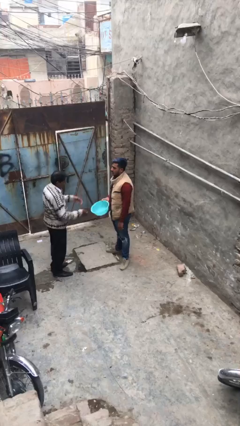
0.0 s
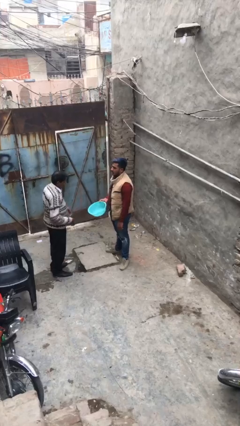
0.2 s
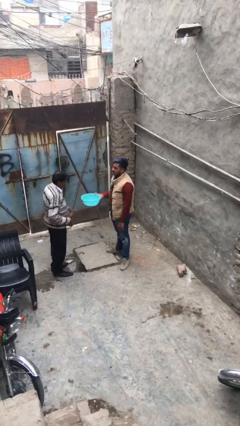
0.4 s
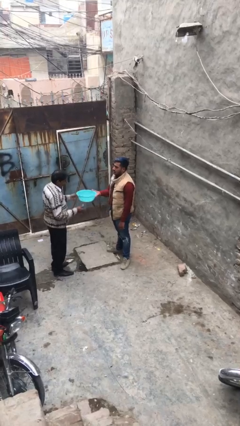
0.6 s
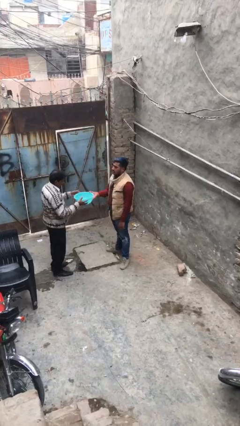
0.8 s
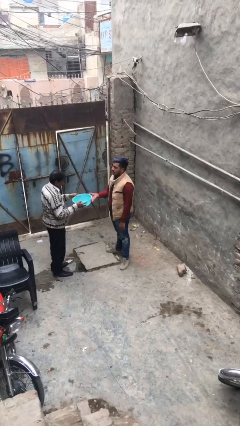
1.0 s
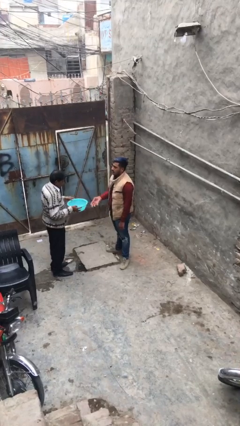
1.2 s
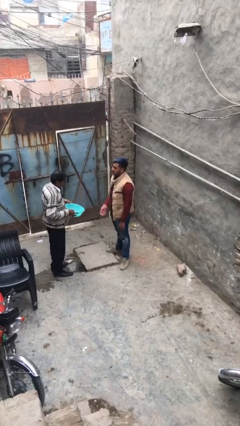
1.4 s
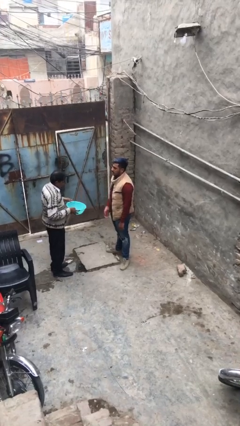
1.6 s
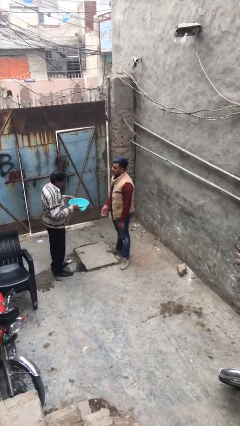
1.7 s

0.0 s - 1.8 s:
person transfers object to person

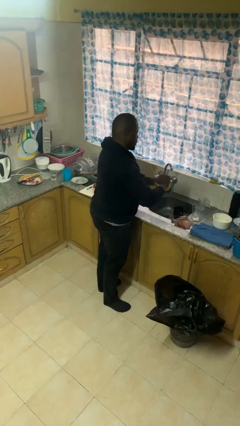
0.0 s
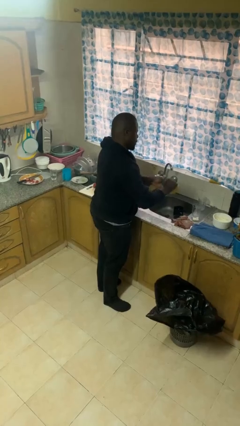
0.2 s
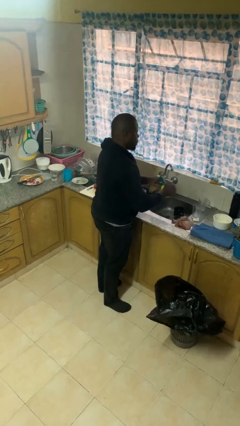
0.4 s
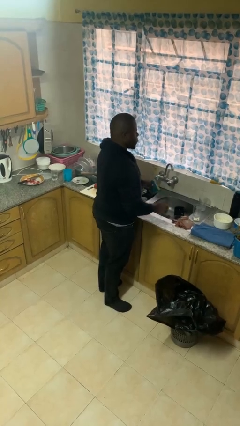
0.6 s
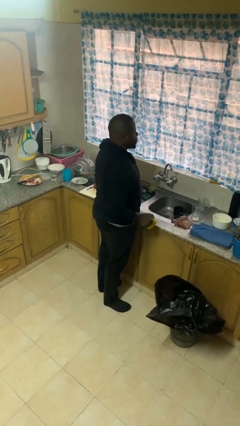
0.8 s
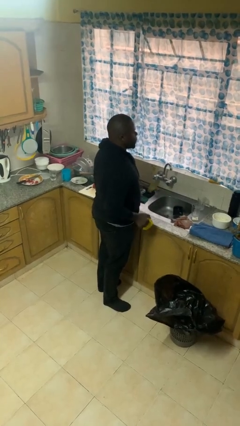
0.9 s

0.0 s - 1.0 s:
person washes dish

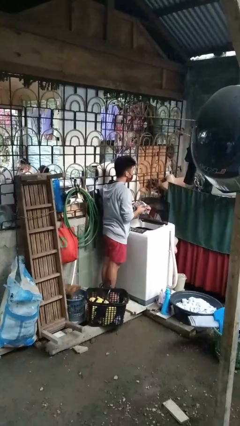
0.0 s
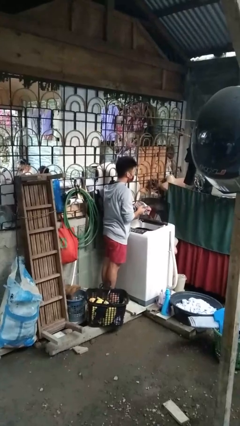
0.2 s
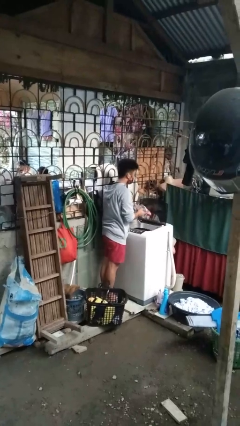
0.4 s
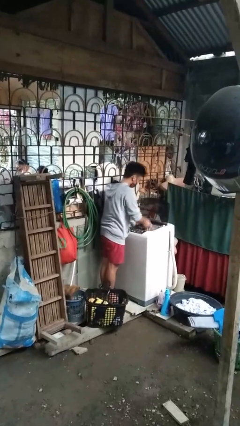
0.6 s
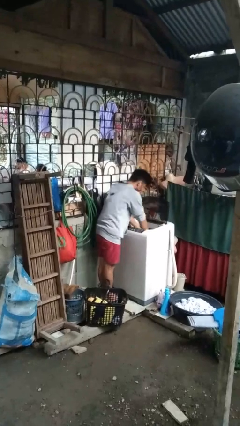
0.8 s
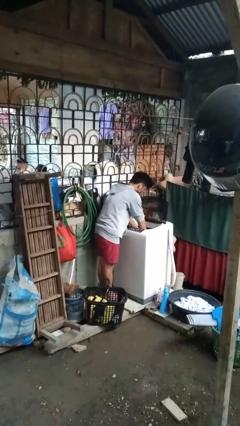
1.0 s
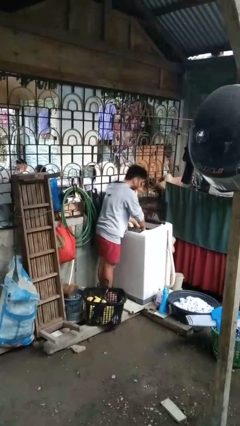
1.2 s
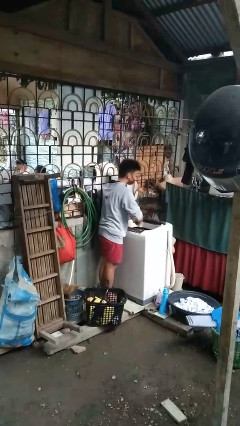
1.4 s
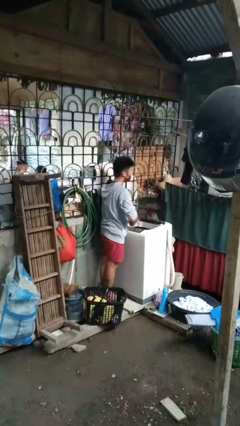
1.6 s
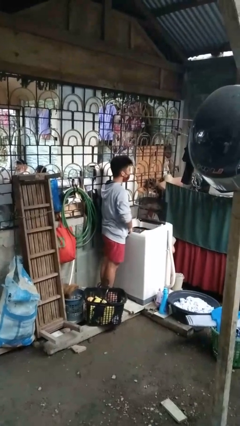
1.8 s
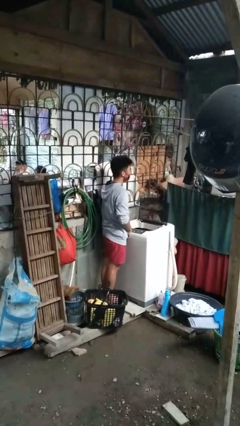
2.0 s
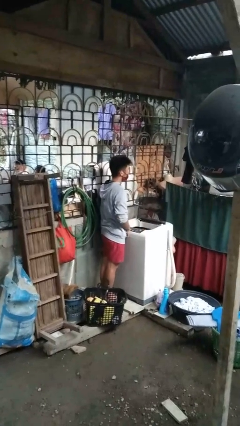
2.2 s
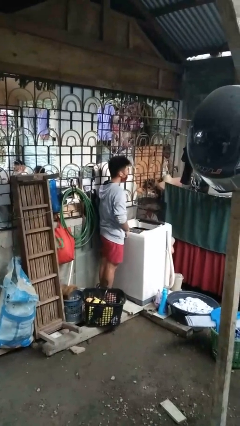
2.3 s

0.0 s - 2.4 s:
person loads dryer

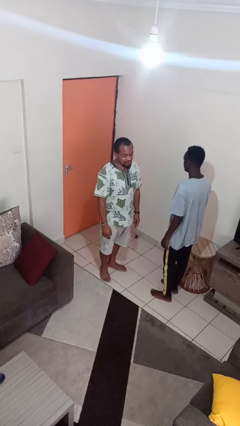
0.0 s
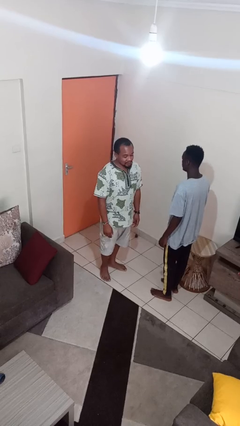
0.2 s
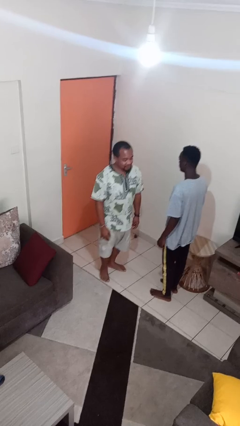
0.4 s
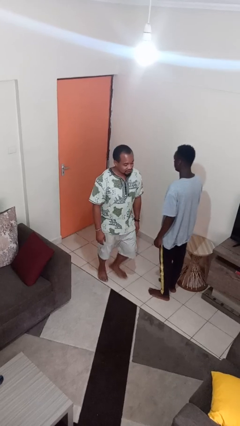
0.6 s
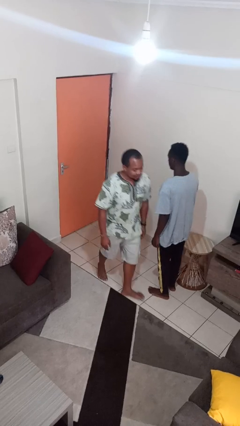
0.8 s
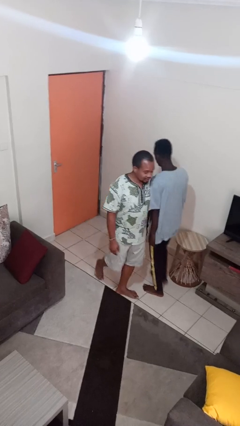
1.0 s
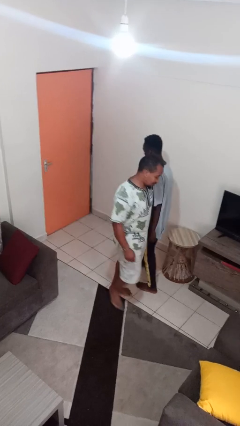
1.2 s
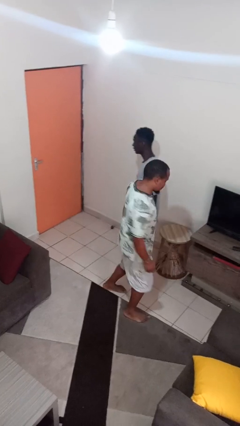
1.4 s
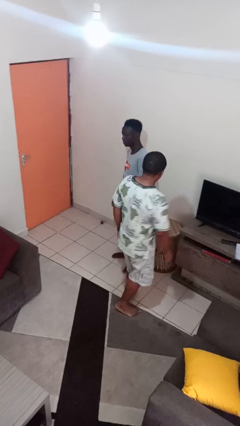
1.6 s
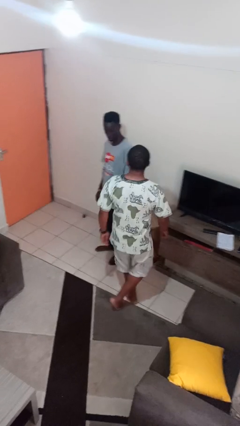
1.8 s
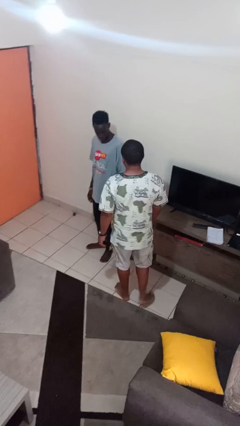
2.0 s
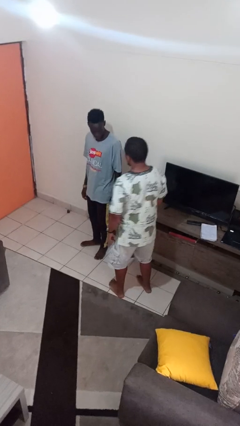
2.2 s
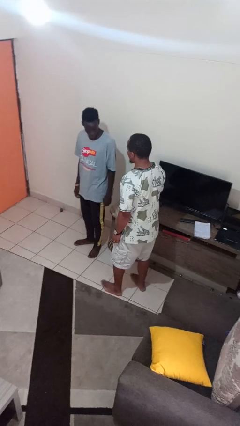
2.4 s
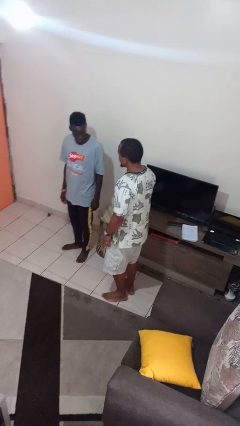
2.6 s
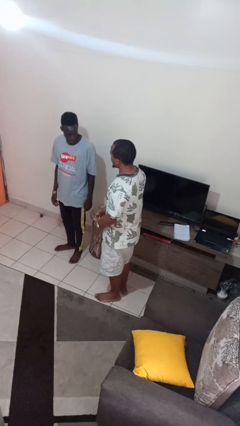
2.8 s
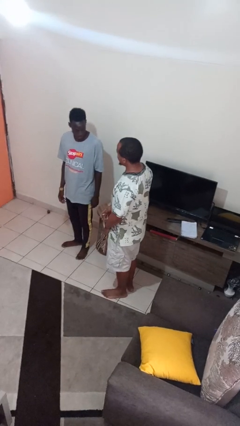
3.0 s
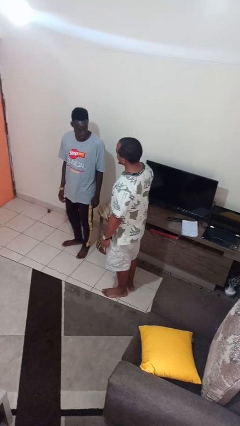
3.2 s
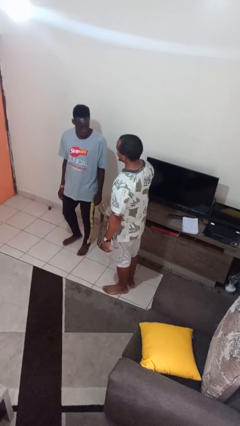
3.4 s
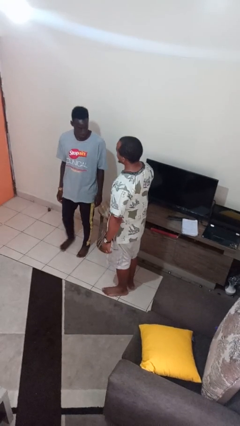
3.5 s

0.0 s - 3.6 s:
person bumps into person

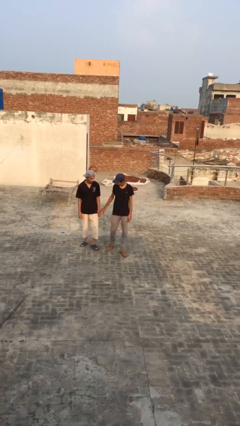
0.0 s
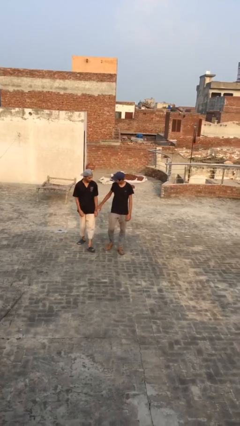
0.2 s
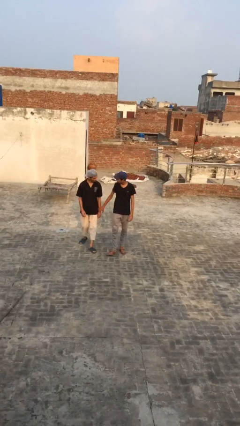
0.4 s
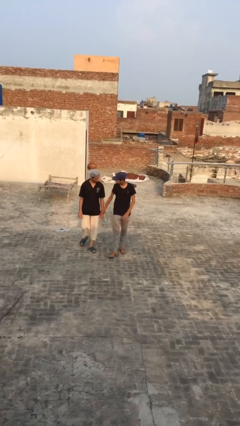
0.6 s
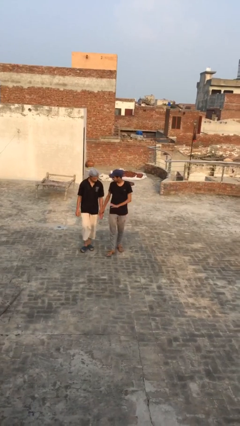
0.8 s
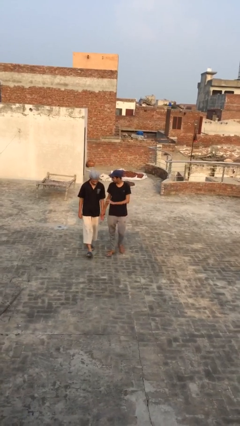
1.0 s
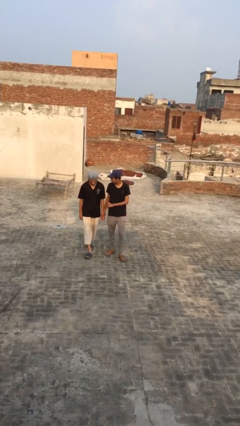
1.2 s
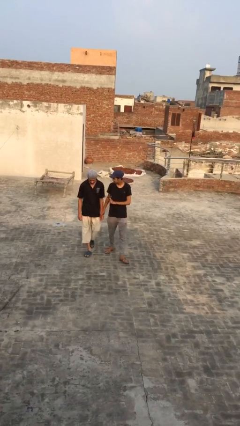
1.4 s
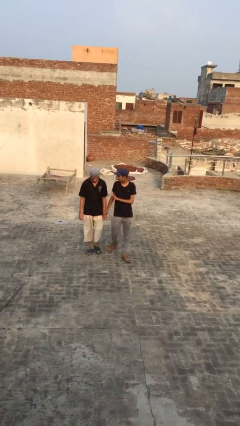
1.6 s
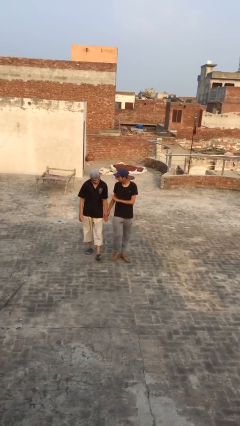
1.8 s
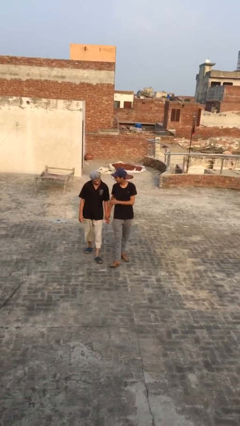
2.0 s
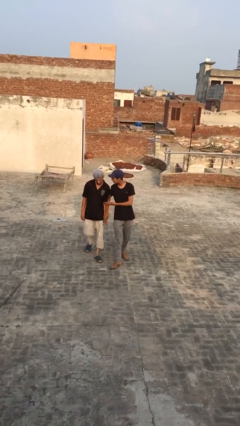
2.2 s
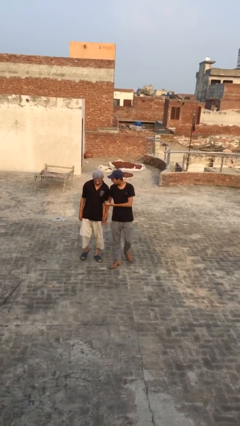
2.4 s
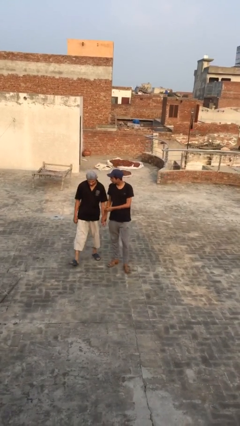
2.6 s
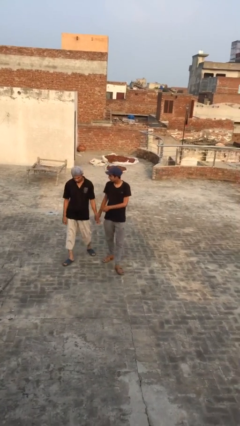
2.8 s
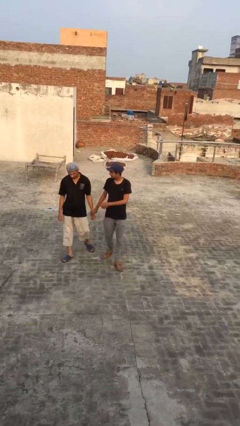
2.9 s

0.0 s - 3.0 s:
person holds hand

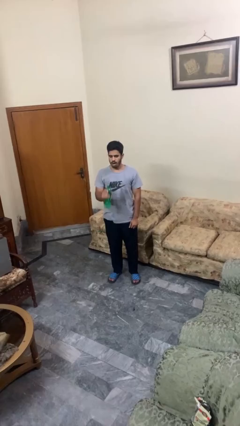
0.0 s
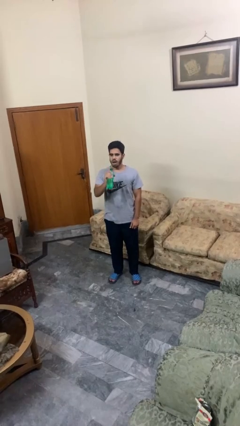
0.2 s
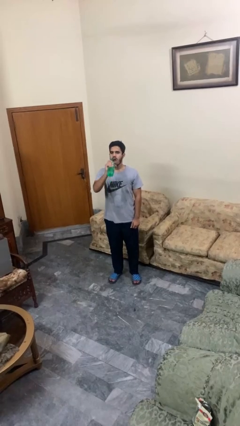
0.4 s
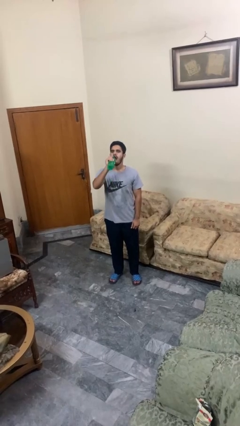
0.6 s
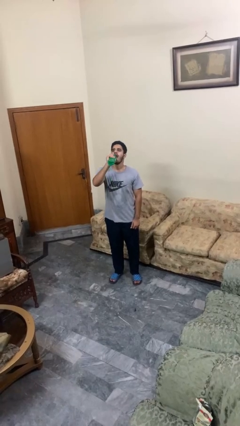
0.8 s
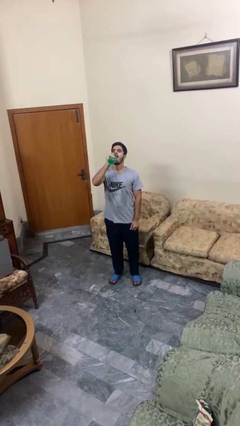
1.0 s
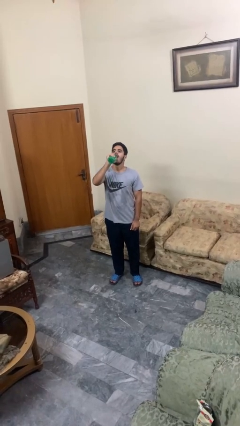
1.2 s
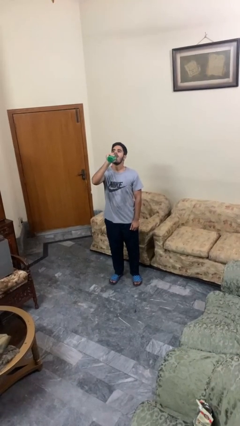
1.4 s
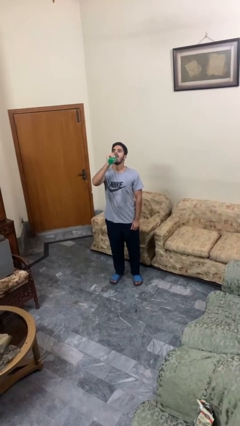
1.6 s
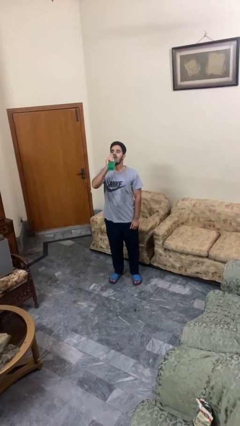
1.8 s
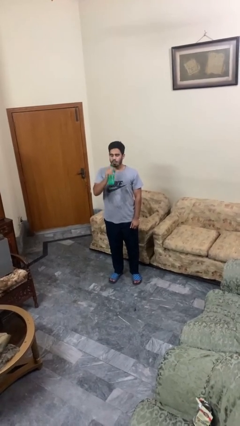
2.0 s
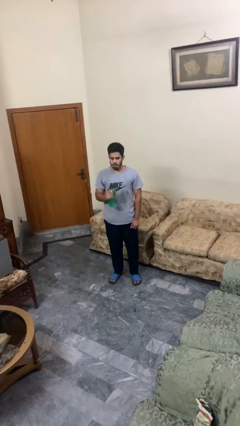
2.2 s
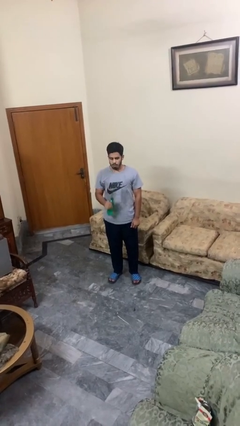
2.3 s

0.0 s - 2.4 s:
person drinks from bottle

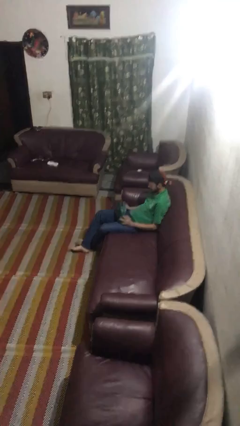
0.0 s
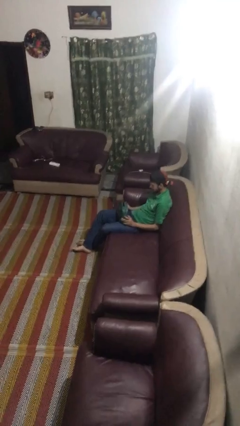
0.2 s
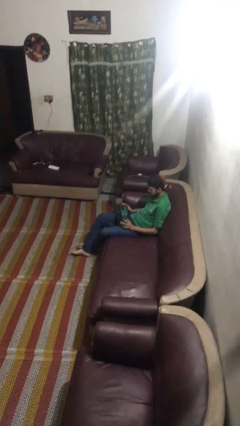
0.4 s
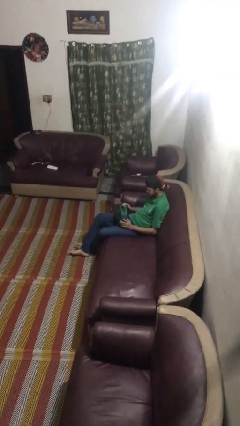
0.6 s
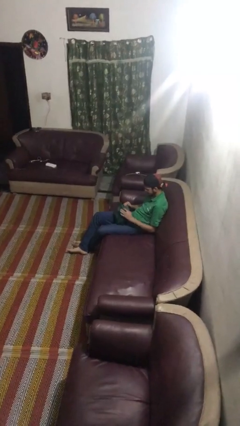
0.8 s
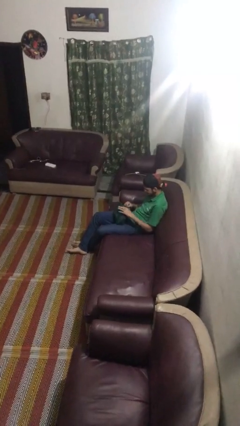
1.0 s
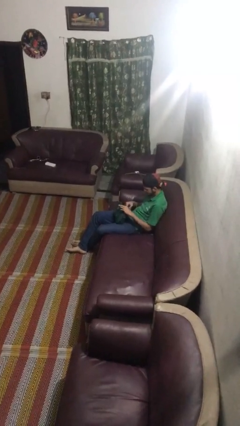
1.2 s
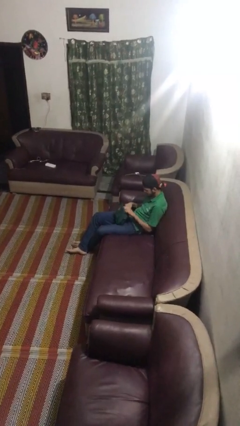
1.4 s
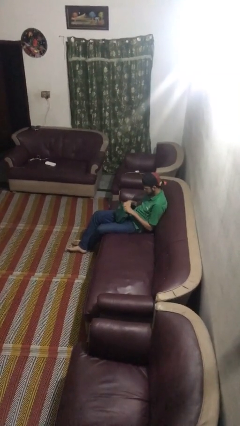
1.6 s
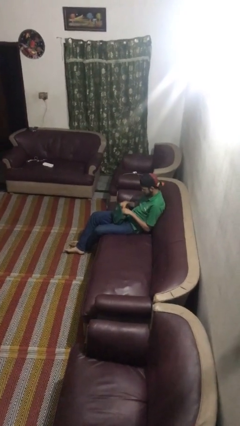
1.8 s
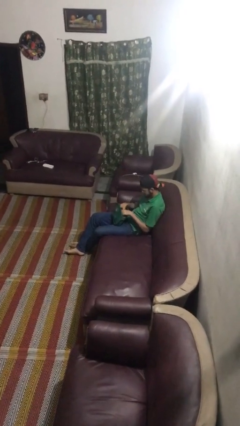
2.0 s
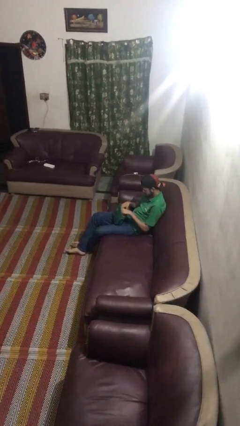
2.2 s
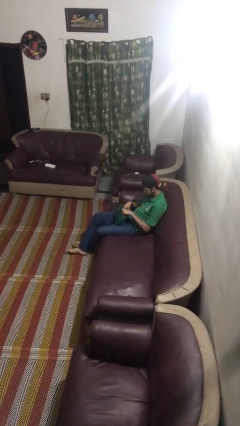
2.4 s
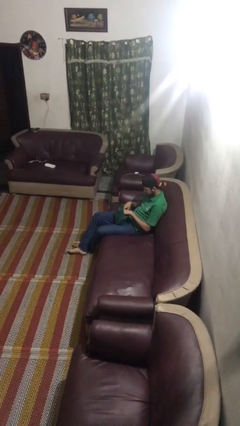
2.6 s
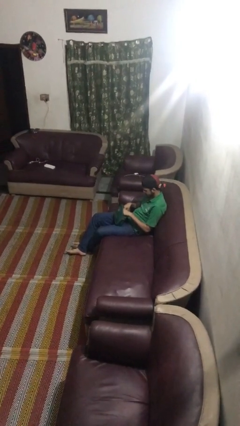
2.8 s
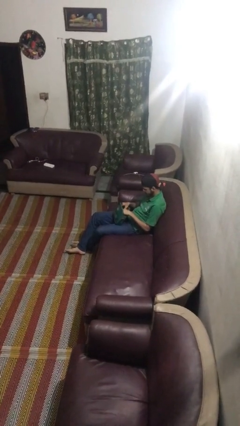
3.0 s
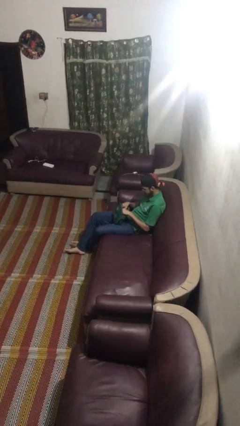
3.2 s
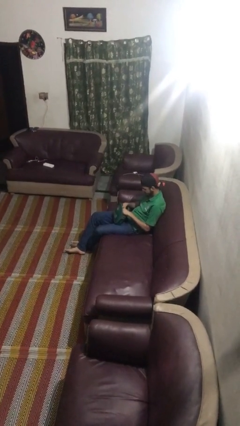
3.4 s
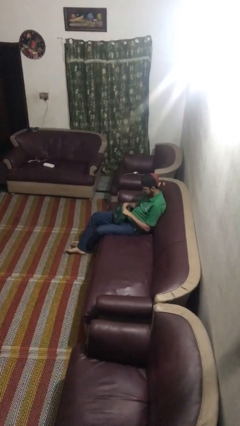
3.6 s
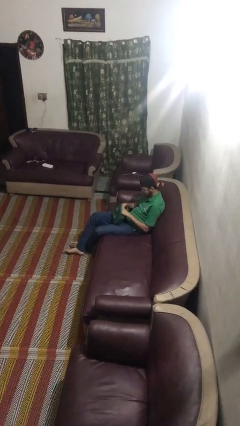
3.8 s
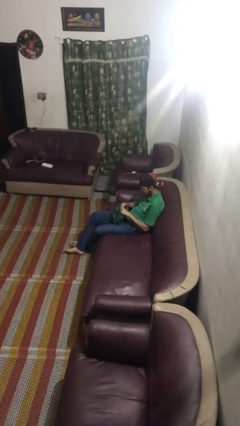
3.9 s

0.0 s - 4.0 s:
person searches in purse
